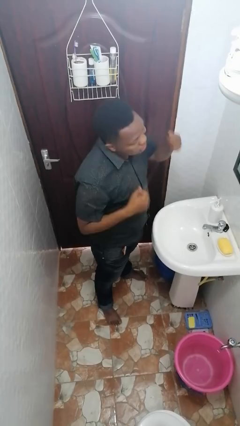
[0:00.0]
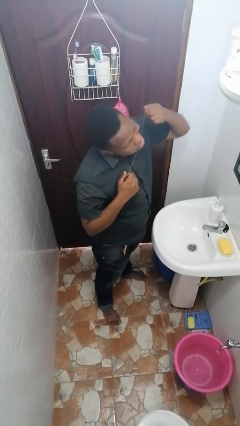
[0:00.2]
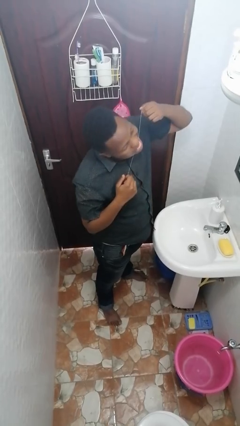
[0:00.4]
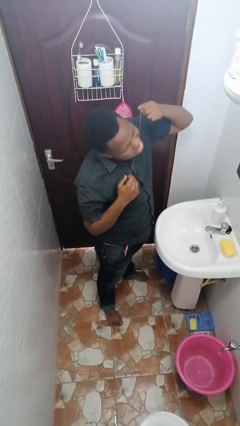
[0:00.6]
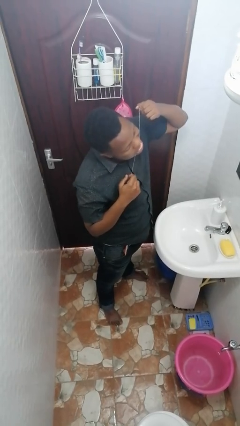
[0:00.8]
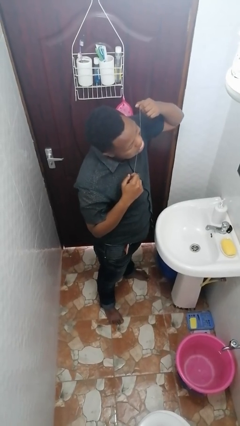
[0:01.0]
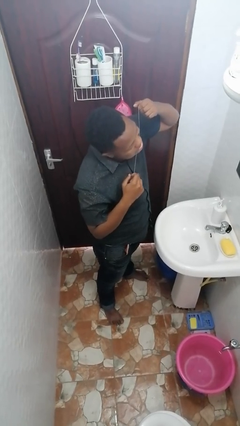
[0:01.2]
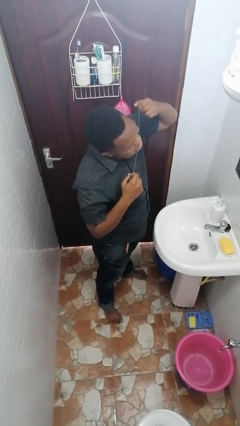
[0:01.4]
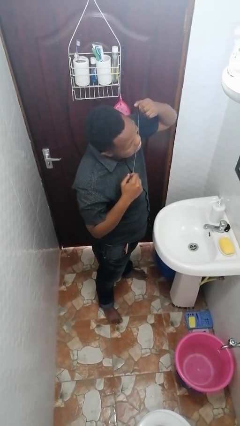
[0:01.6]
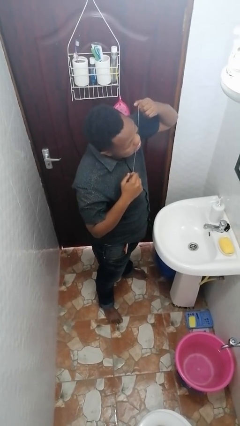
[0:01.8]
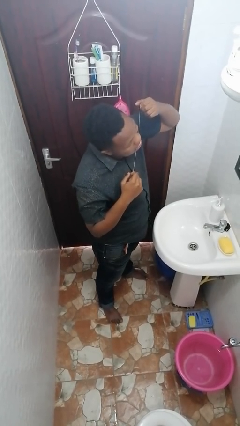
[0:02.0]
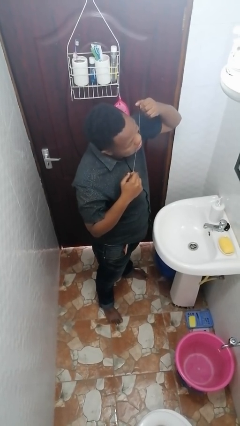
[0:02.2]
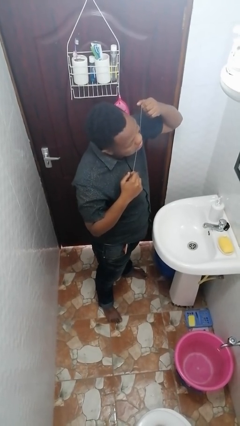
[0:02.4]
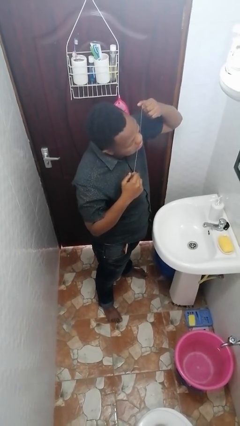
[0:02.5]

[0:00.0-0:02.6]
person flosses

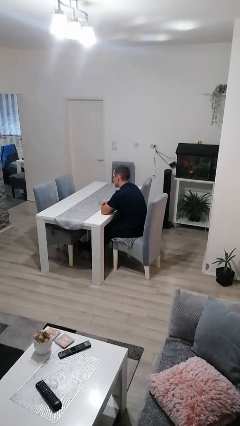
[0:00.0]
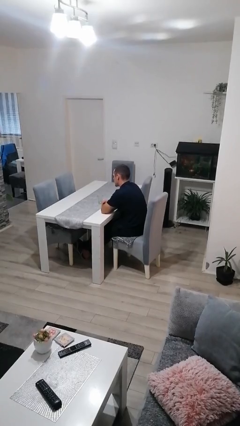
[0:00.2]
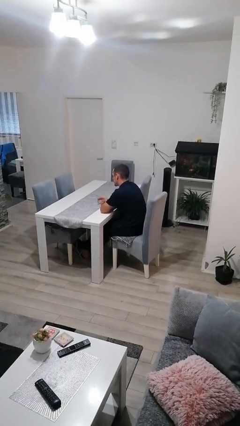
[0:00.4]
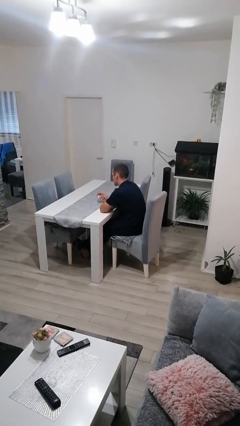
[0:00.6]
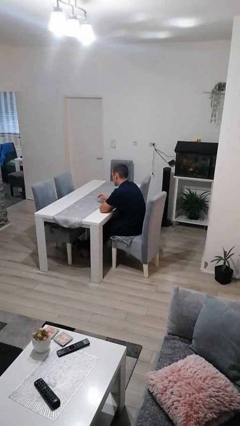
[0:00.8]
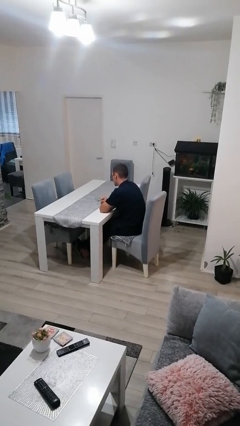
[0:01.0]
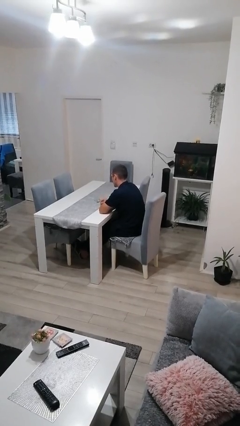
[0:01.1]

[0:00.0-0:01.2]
person knocks over glass

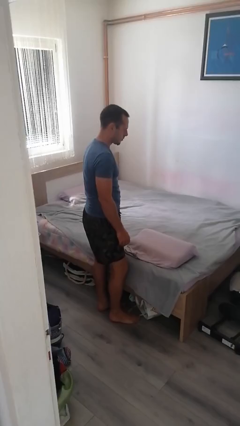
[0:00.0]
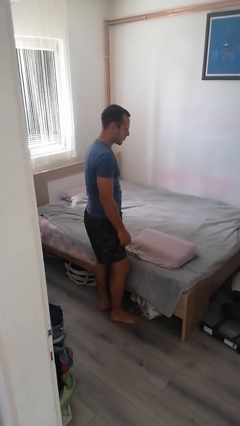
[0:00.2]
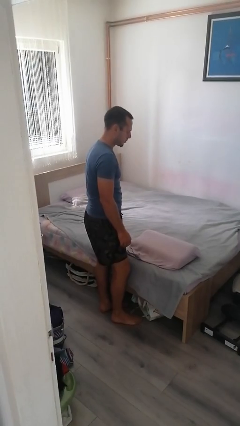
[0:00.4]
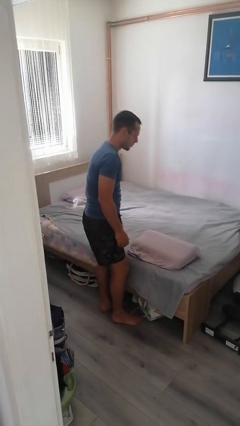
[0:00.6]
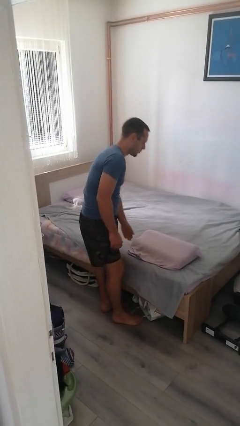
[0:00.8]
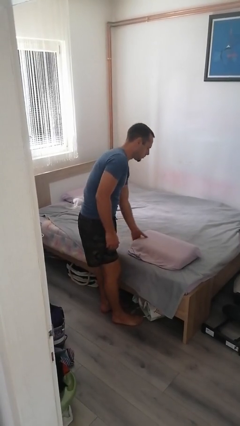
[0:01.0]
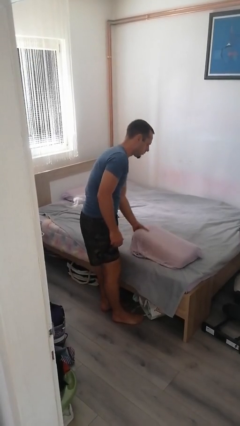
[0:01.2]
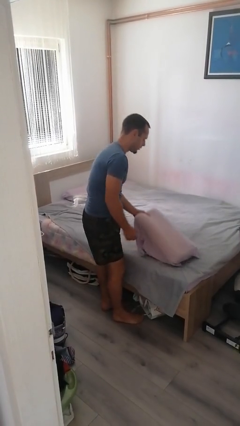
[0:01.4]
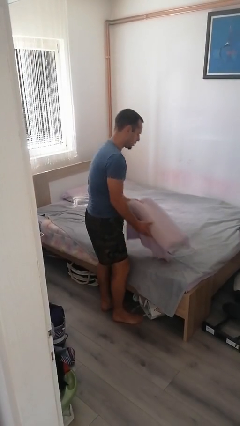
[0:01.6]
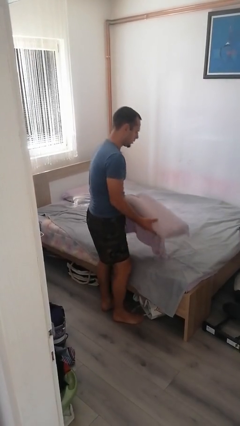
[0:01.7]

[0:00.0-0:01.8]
person picks up object from bed

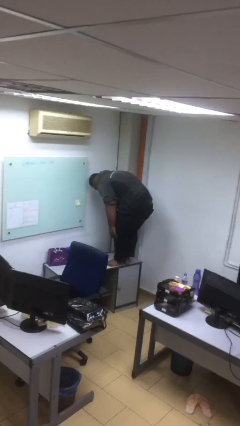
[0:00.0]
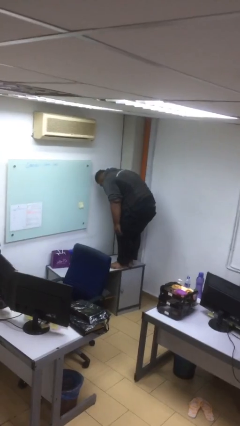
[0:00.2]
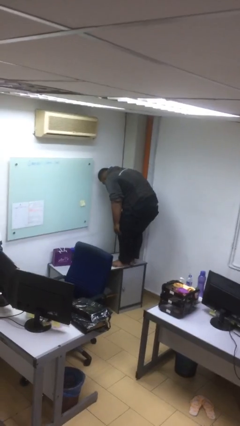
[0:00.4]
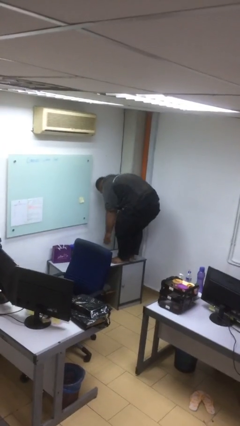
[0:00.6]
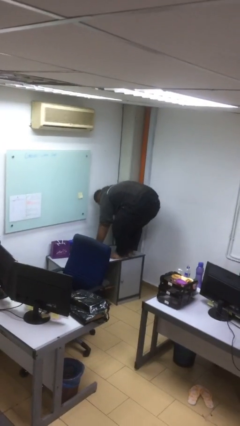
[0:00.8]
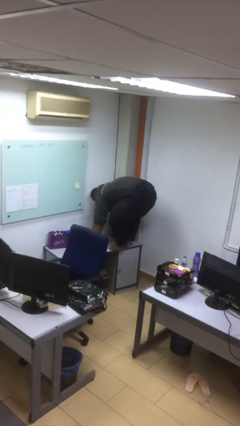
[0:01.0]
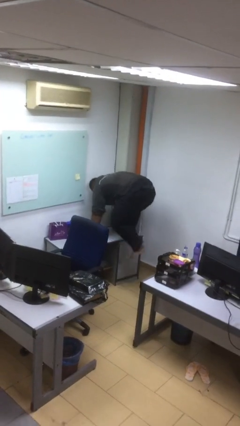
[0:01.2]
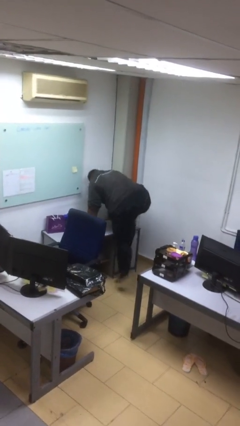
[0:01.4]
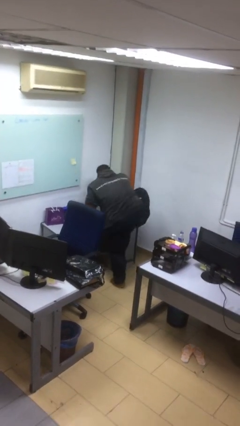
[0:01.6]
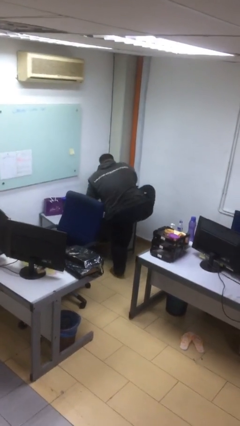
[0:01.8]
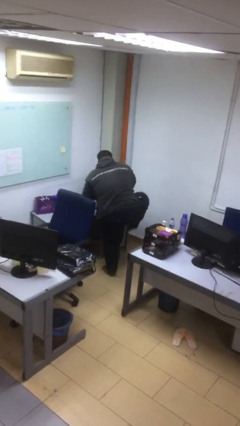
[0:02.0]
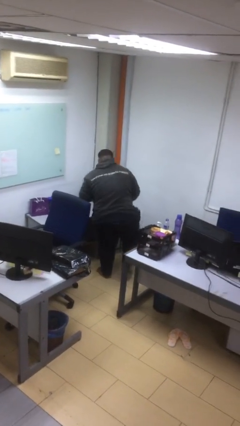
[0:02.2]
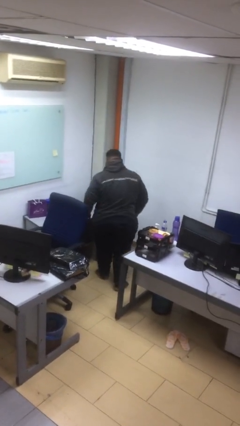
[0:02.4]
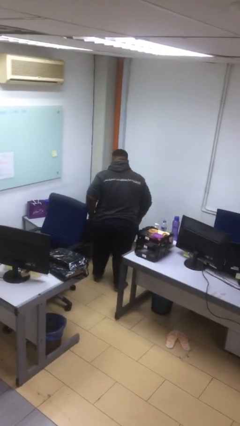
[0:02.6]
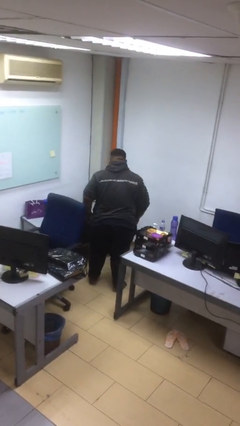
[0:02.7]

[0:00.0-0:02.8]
person climbs off table

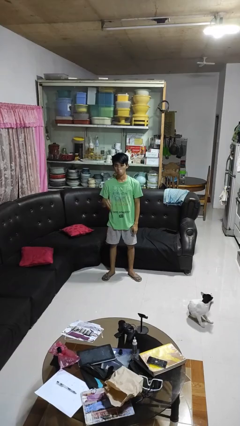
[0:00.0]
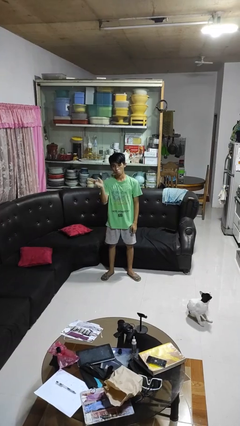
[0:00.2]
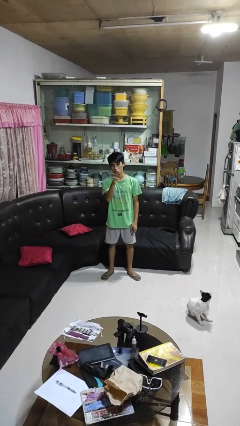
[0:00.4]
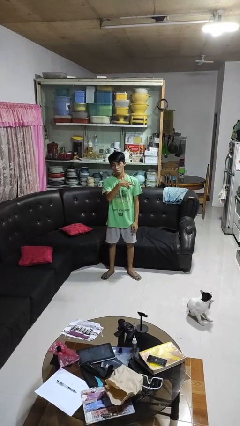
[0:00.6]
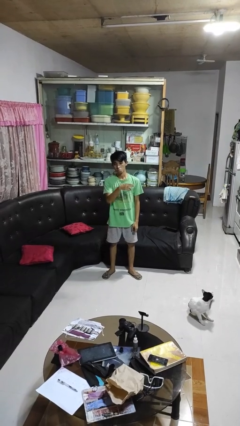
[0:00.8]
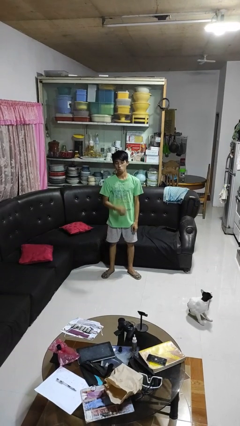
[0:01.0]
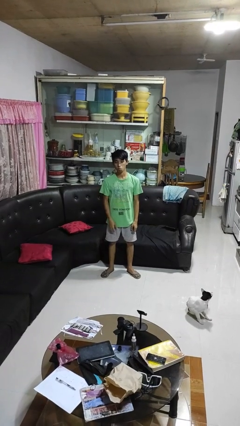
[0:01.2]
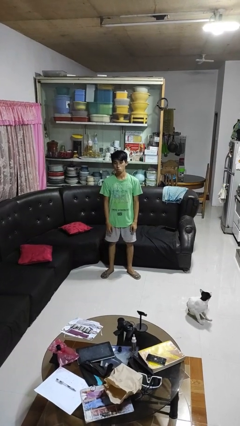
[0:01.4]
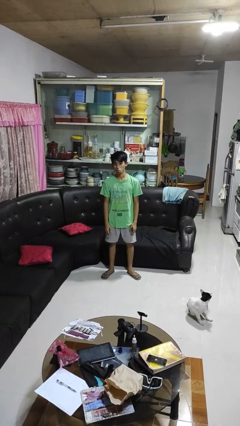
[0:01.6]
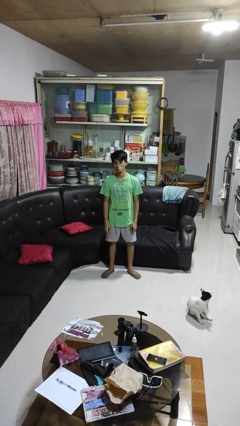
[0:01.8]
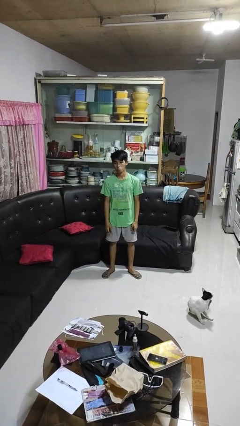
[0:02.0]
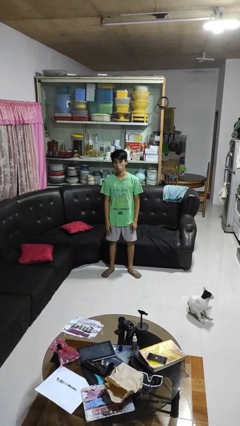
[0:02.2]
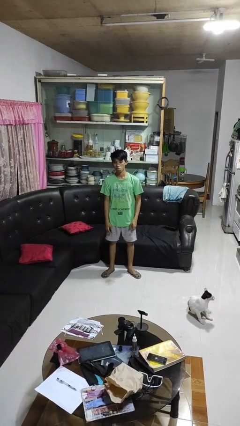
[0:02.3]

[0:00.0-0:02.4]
person gestures swipe left

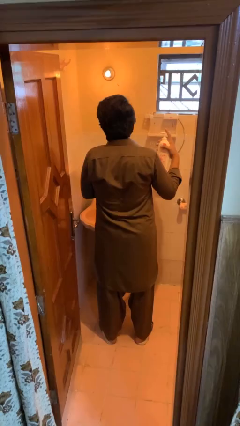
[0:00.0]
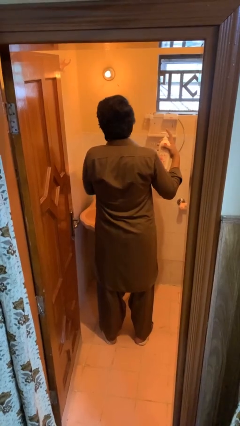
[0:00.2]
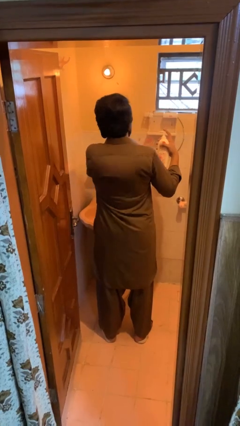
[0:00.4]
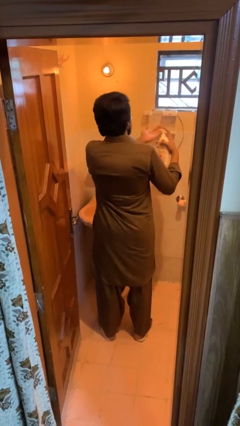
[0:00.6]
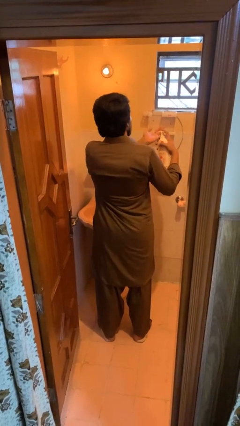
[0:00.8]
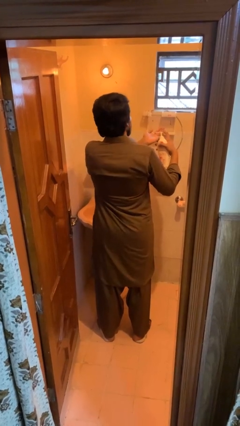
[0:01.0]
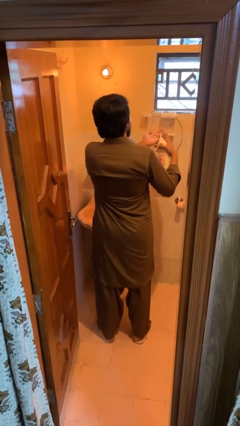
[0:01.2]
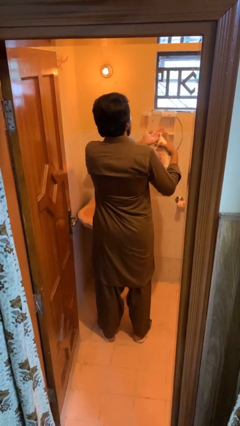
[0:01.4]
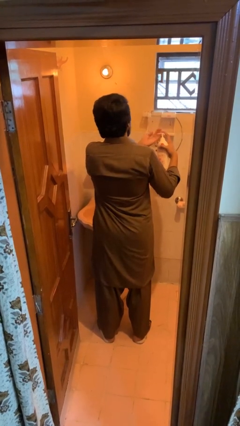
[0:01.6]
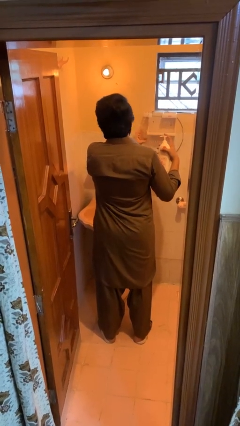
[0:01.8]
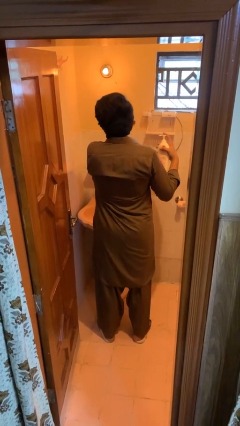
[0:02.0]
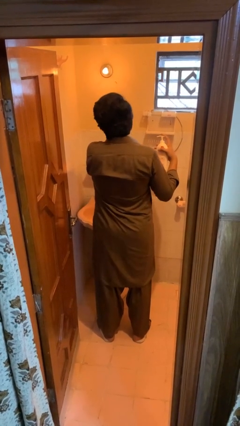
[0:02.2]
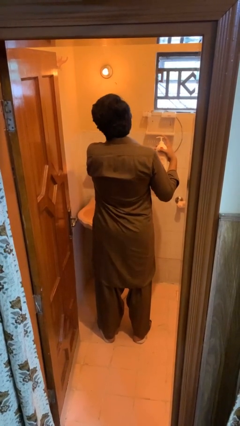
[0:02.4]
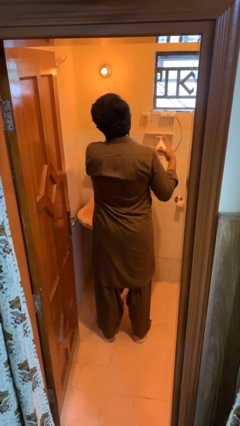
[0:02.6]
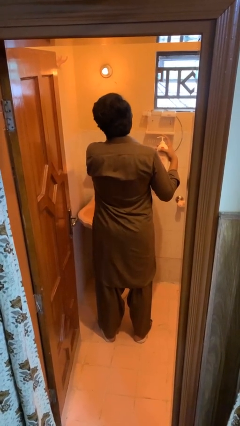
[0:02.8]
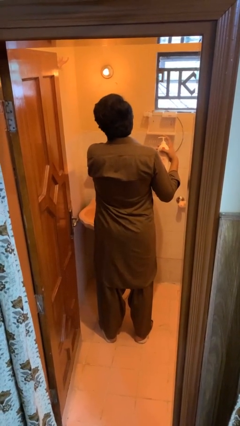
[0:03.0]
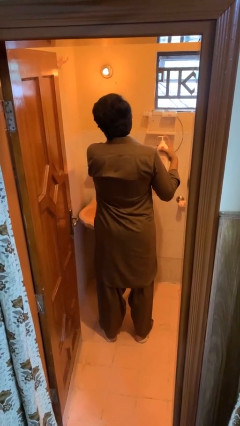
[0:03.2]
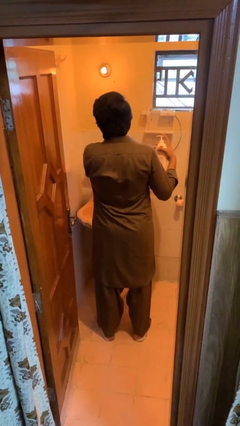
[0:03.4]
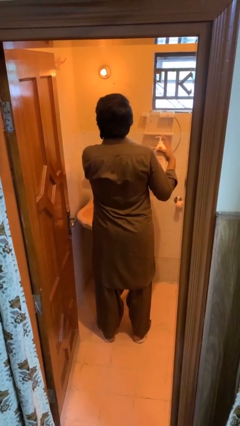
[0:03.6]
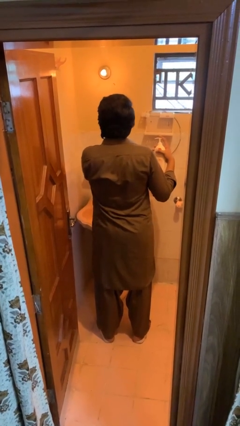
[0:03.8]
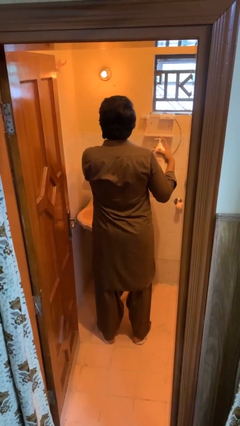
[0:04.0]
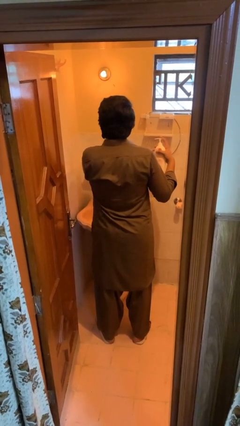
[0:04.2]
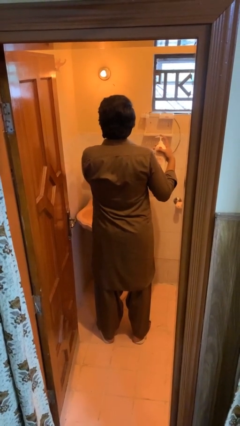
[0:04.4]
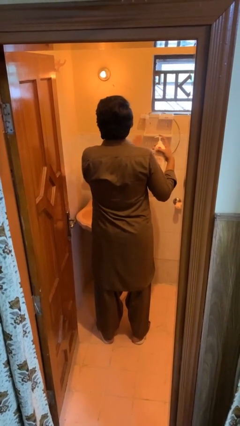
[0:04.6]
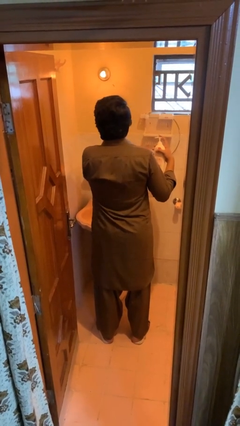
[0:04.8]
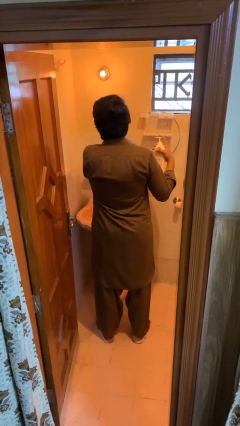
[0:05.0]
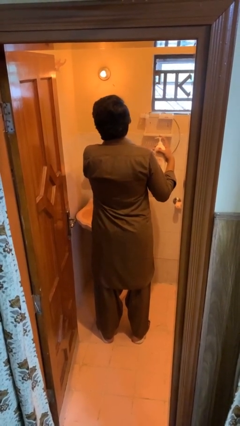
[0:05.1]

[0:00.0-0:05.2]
person applies sunscreen

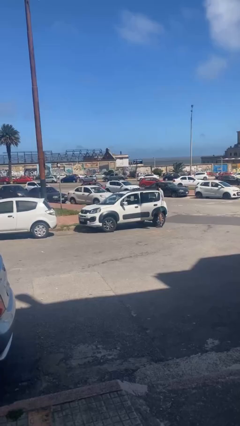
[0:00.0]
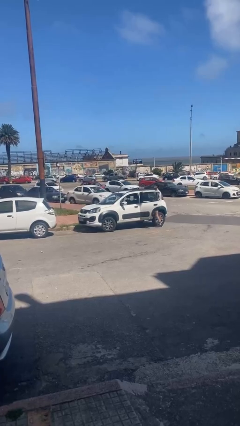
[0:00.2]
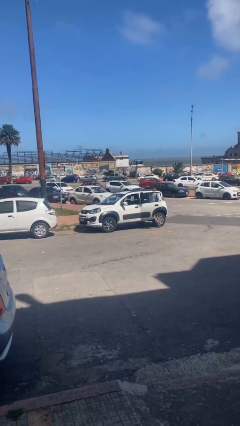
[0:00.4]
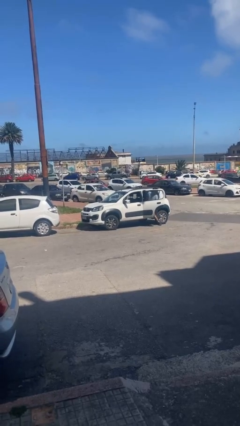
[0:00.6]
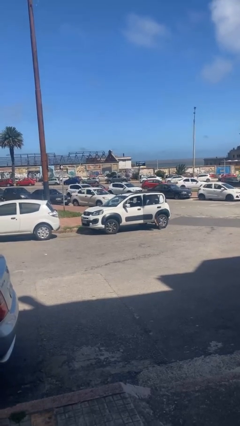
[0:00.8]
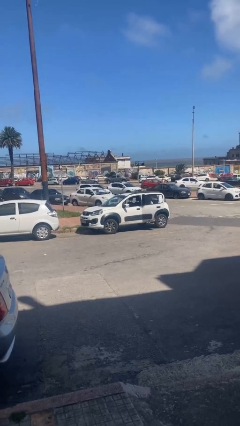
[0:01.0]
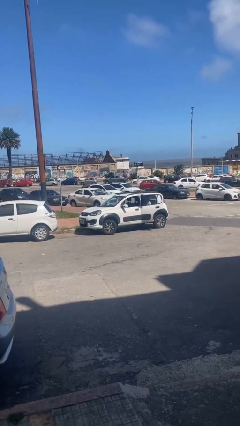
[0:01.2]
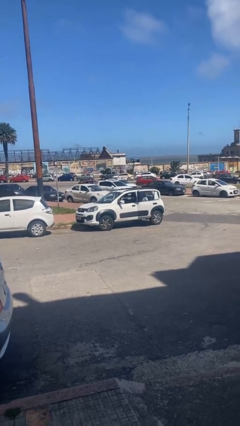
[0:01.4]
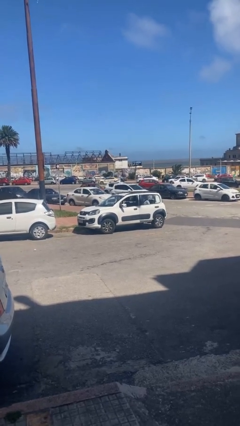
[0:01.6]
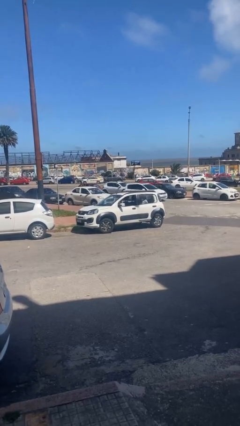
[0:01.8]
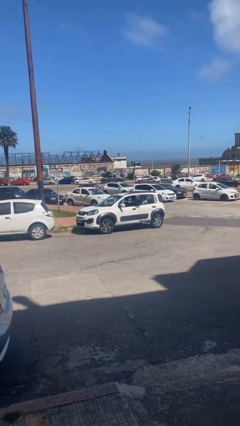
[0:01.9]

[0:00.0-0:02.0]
car picks up person
